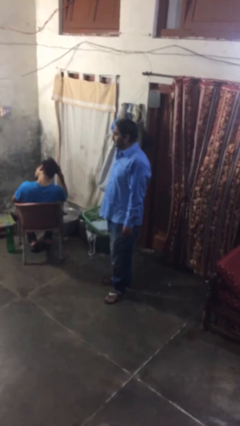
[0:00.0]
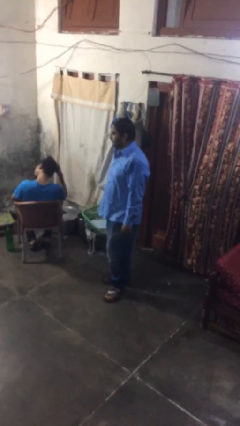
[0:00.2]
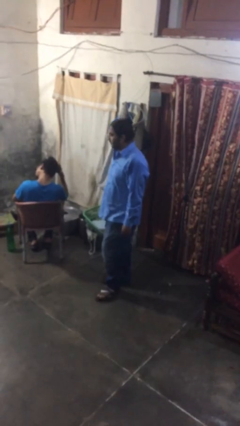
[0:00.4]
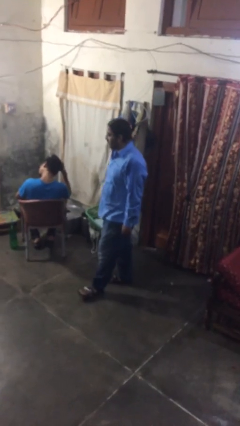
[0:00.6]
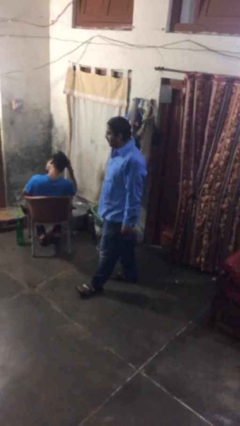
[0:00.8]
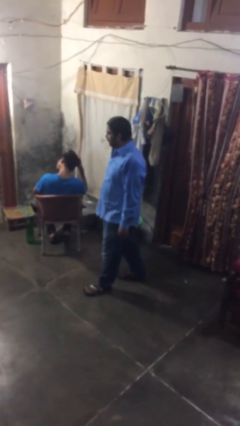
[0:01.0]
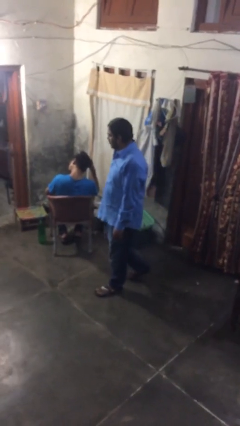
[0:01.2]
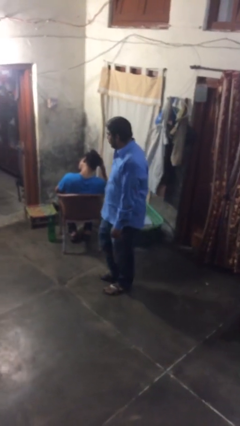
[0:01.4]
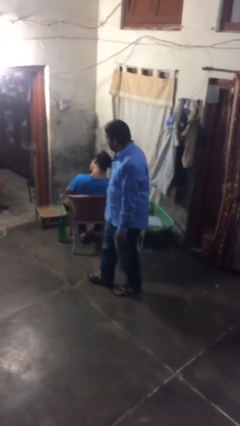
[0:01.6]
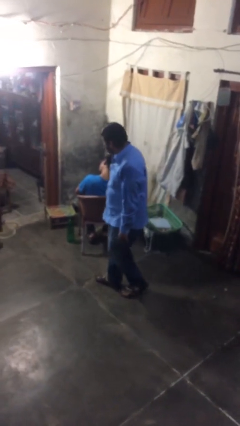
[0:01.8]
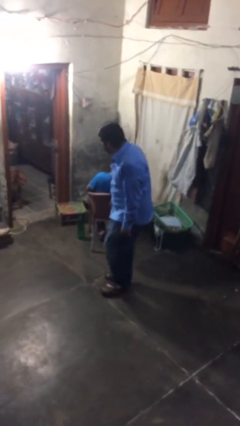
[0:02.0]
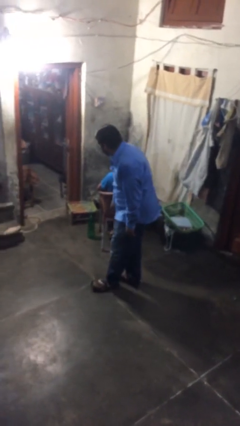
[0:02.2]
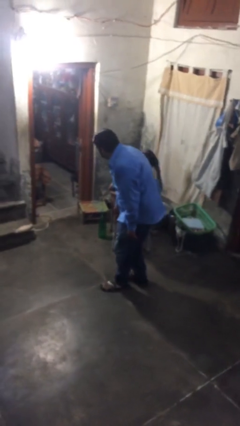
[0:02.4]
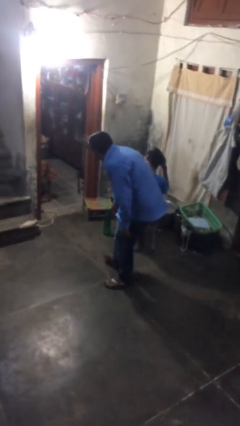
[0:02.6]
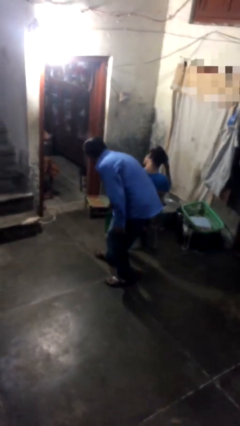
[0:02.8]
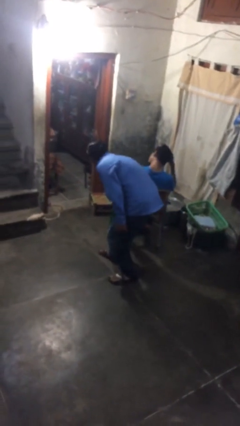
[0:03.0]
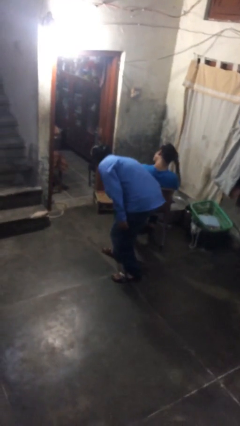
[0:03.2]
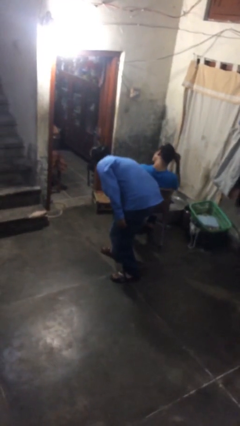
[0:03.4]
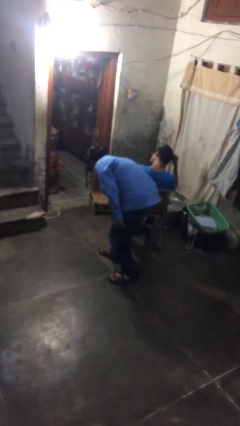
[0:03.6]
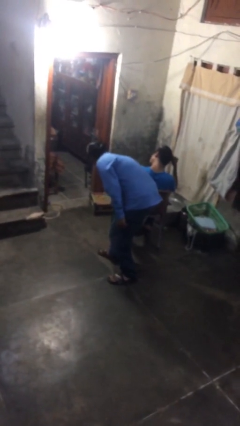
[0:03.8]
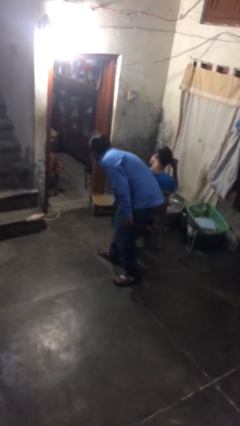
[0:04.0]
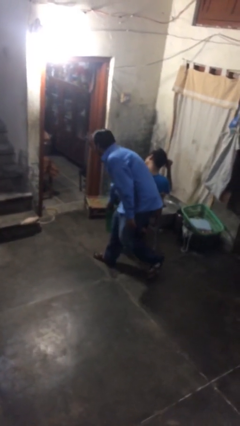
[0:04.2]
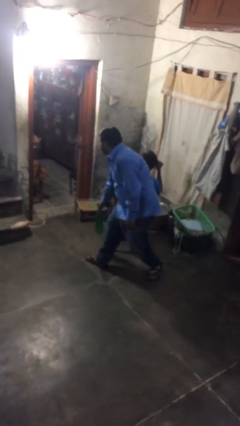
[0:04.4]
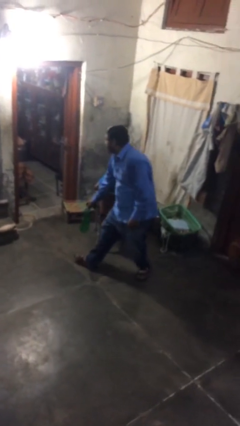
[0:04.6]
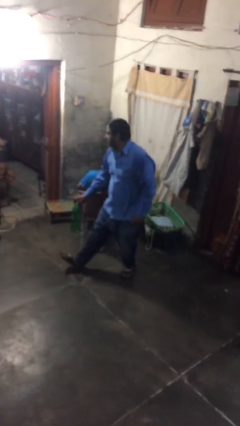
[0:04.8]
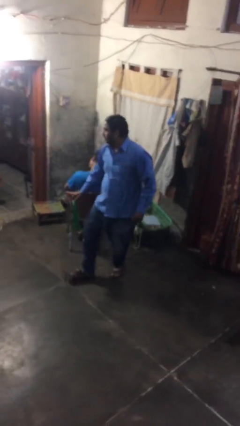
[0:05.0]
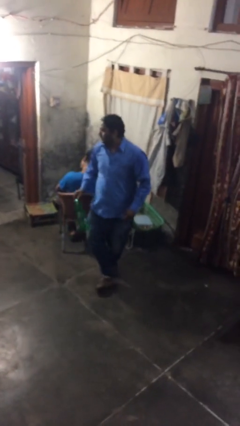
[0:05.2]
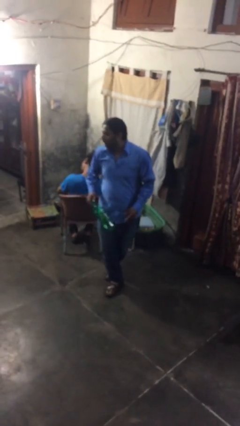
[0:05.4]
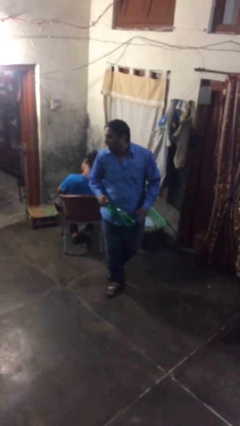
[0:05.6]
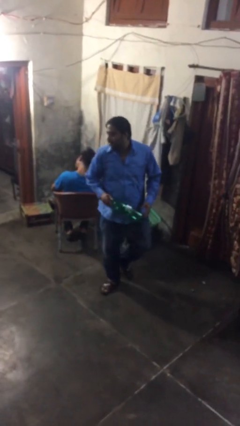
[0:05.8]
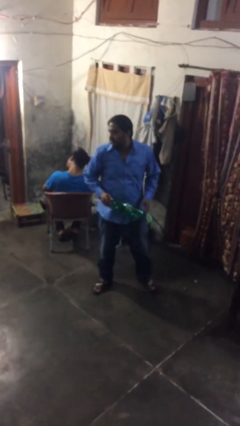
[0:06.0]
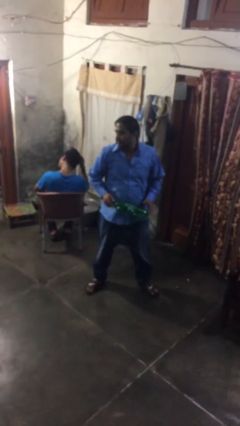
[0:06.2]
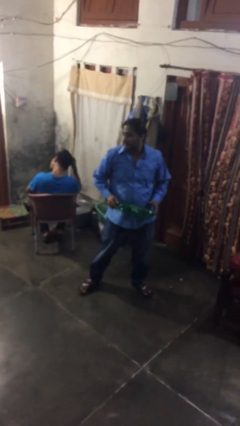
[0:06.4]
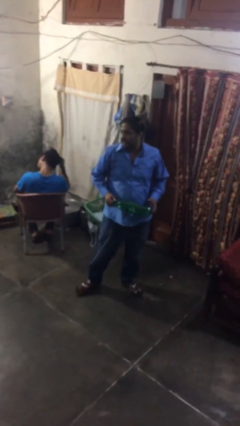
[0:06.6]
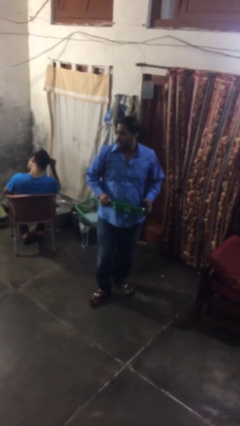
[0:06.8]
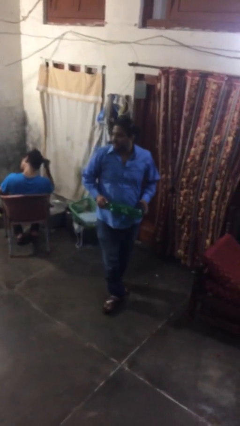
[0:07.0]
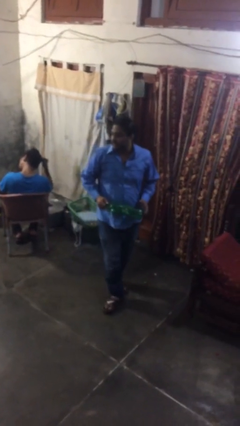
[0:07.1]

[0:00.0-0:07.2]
person steals object from person

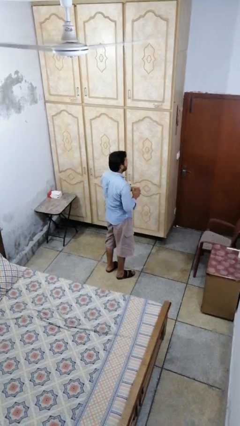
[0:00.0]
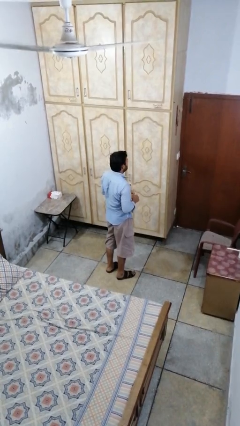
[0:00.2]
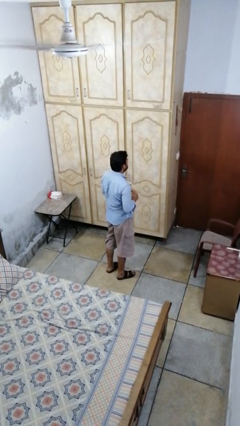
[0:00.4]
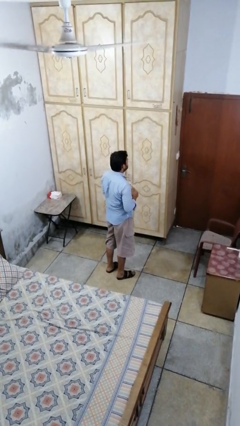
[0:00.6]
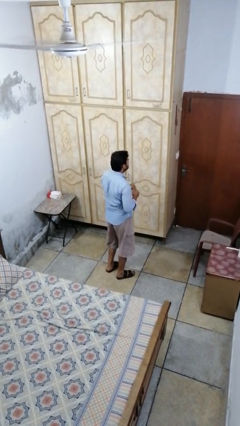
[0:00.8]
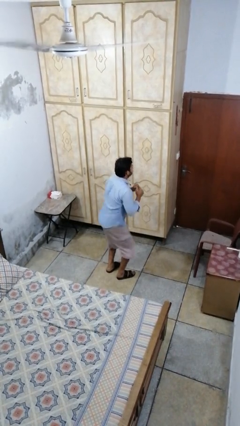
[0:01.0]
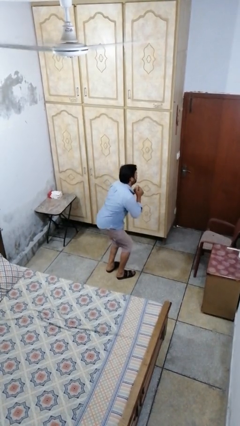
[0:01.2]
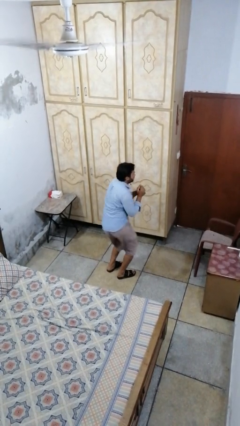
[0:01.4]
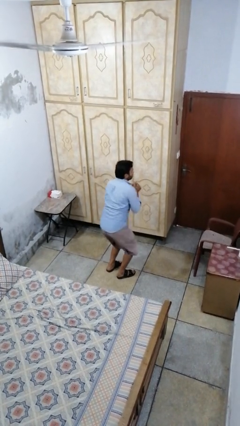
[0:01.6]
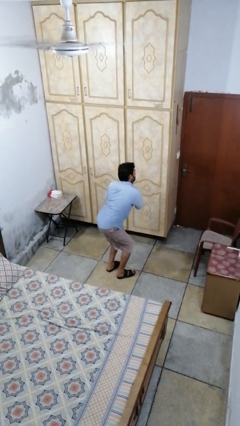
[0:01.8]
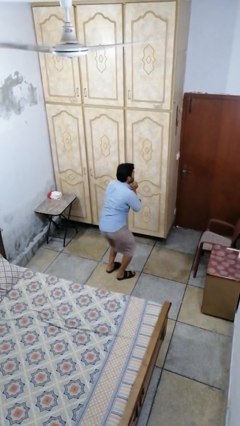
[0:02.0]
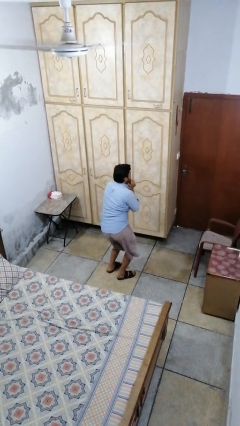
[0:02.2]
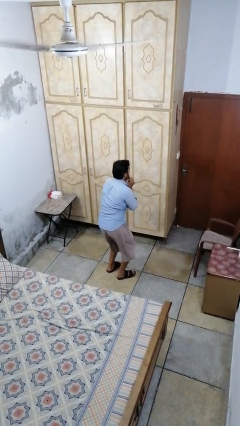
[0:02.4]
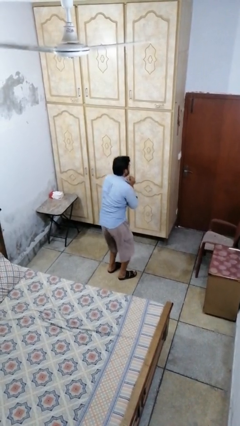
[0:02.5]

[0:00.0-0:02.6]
person wiggles hips

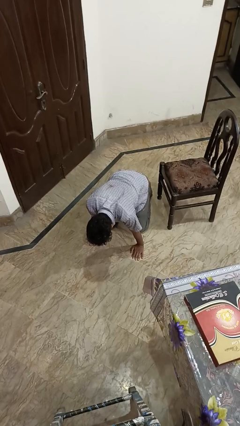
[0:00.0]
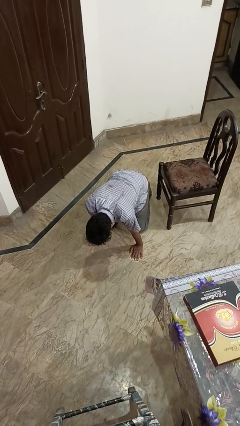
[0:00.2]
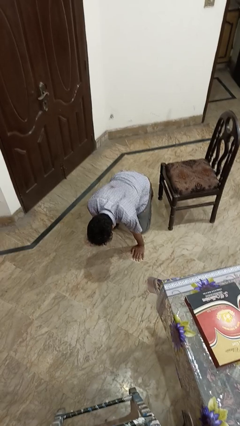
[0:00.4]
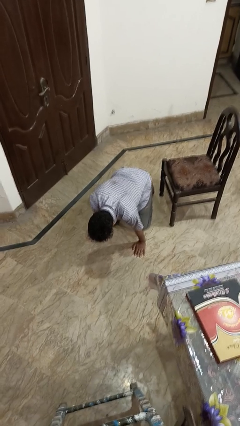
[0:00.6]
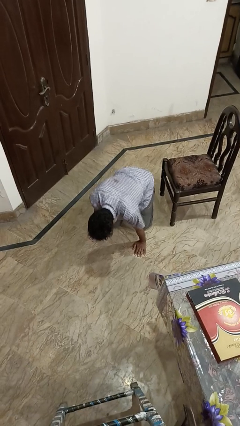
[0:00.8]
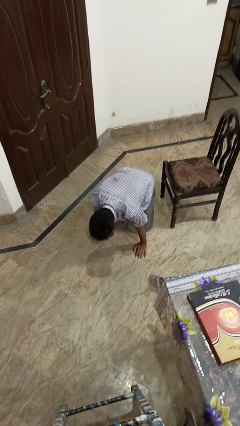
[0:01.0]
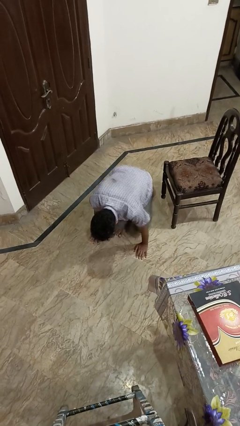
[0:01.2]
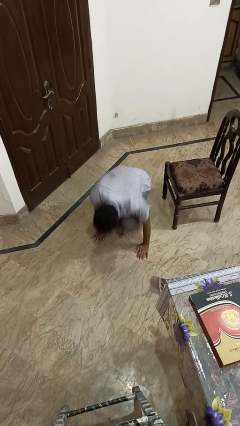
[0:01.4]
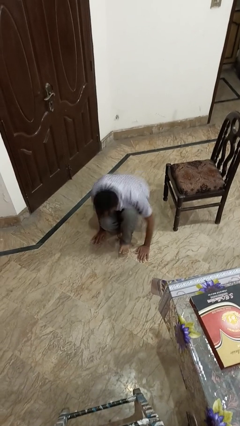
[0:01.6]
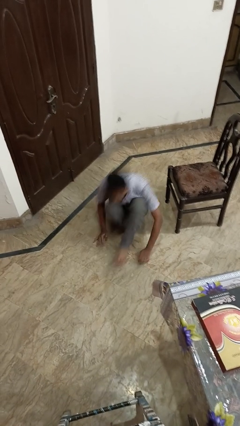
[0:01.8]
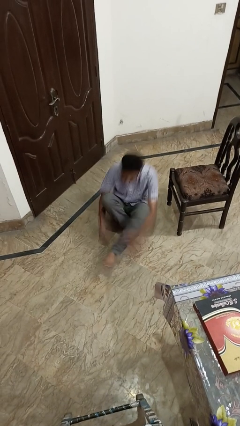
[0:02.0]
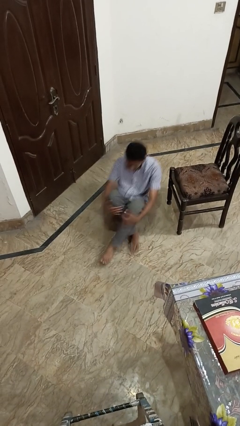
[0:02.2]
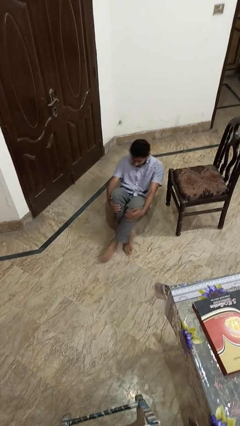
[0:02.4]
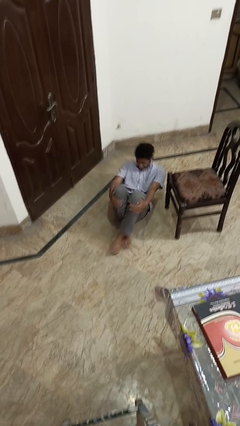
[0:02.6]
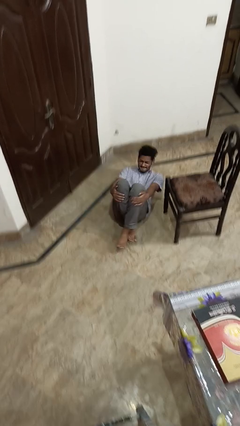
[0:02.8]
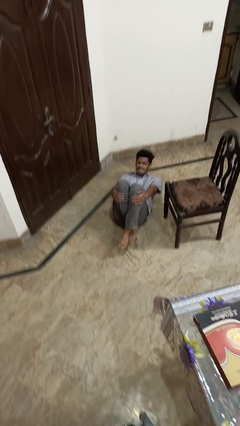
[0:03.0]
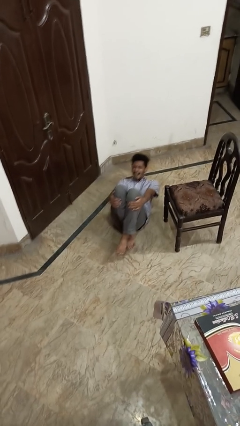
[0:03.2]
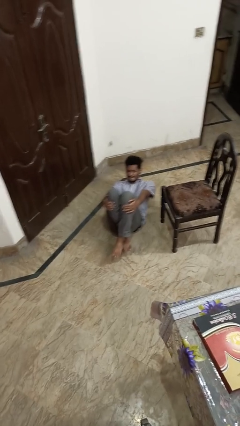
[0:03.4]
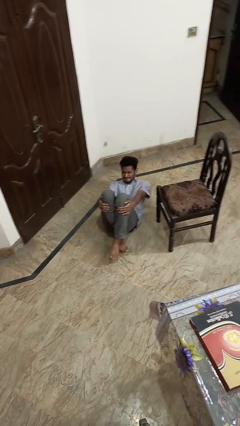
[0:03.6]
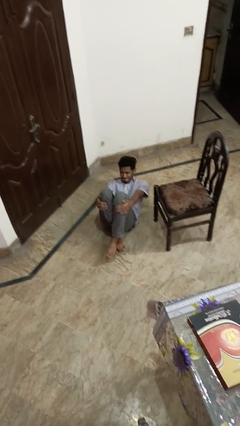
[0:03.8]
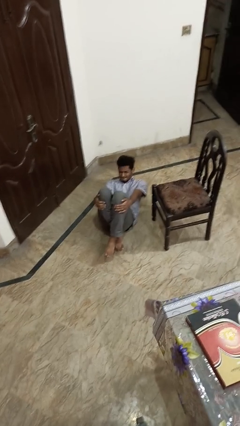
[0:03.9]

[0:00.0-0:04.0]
person lies down on floor

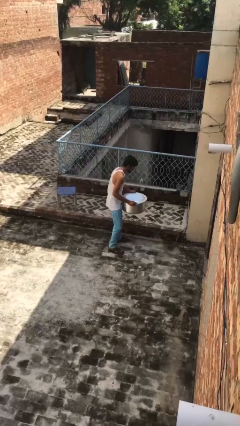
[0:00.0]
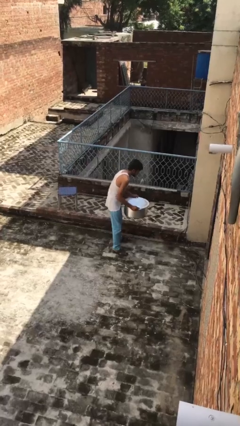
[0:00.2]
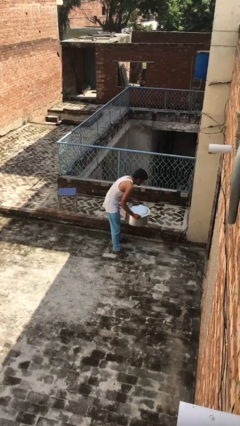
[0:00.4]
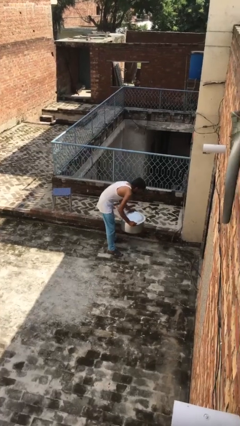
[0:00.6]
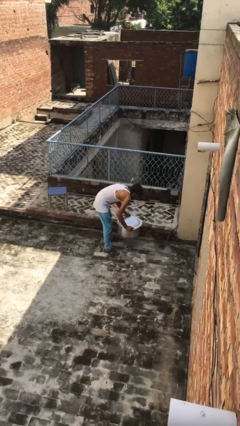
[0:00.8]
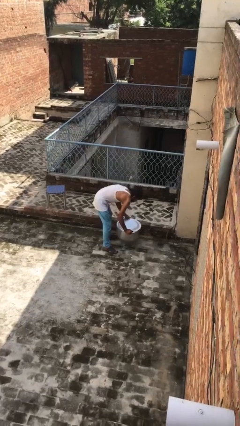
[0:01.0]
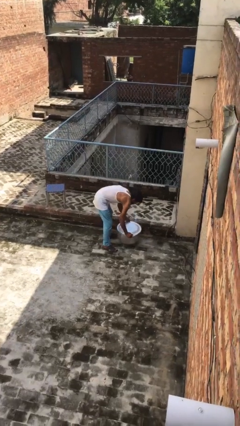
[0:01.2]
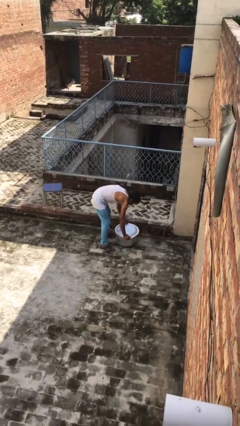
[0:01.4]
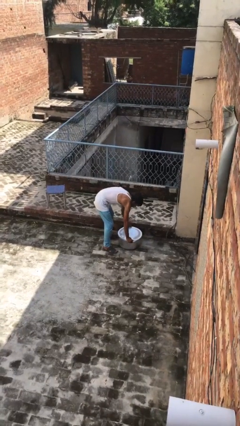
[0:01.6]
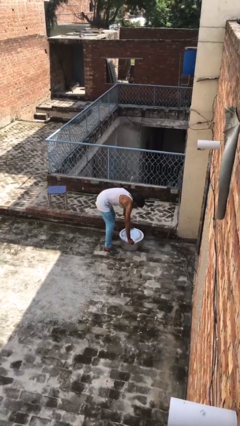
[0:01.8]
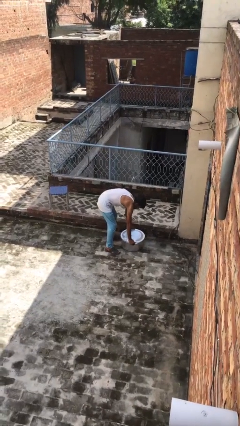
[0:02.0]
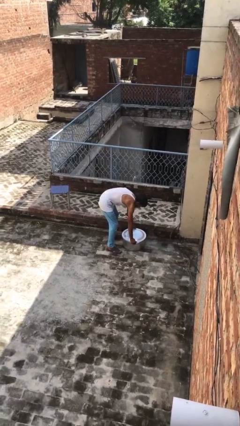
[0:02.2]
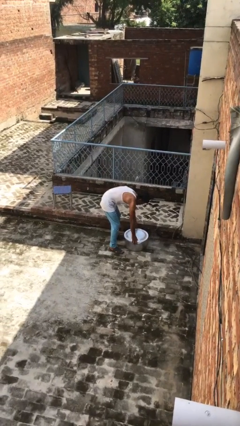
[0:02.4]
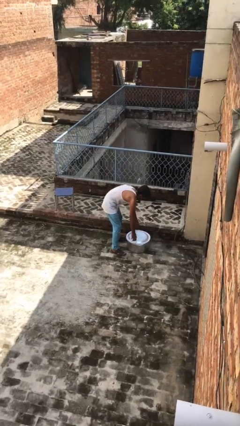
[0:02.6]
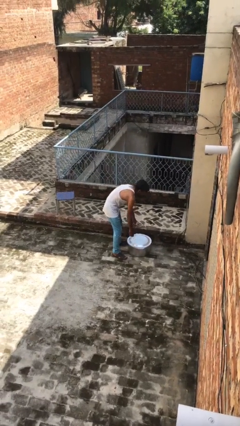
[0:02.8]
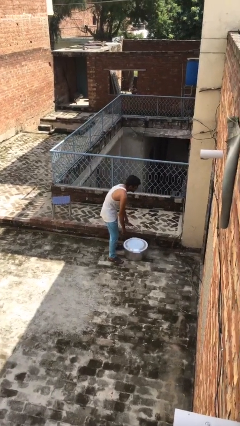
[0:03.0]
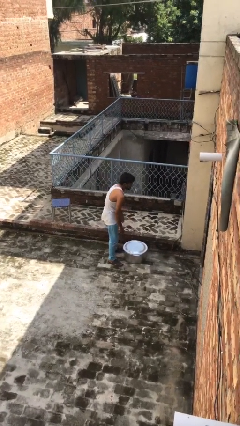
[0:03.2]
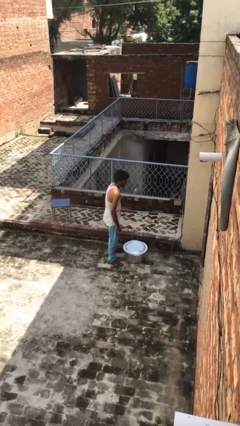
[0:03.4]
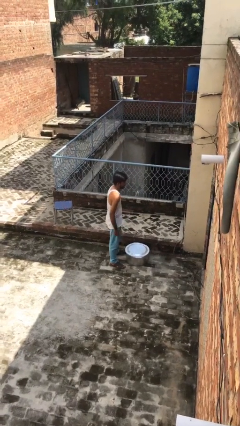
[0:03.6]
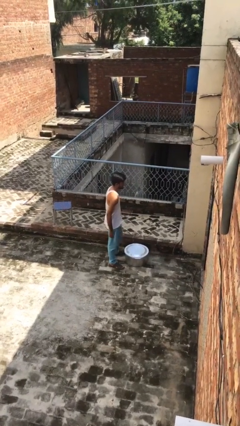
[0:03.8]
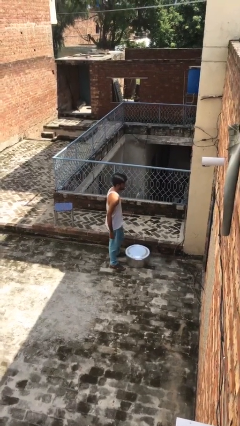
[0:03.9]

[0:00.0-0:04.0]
person puts down object on floor
